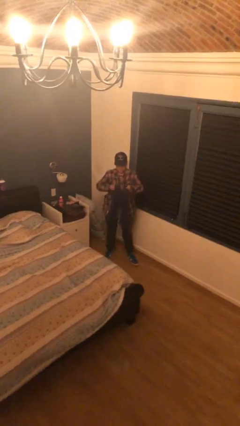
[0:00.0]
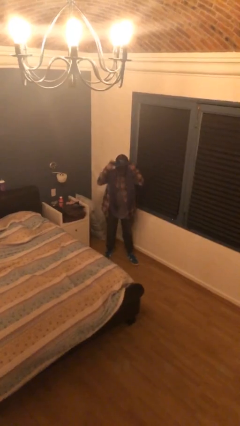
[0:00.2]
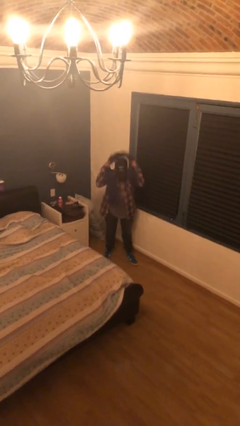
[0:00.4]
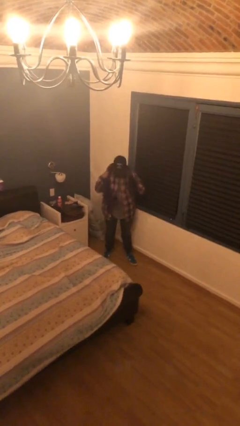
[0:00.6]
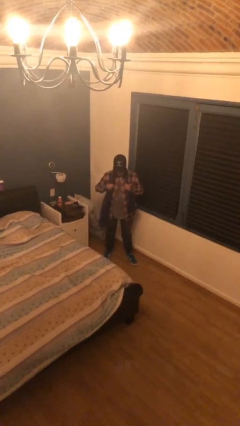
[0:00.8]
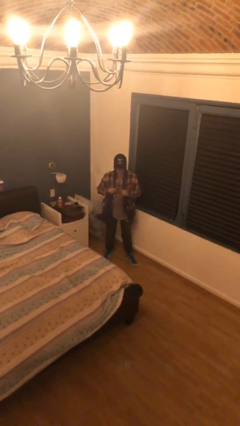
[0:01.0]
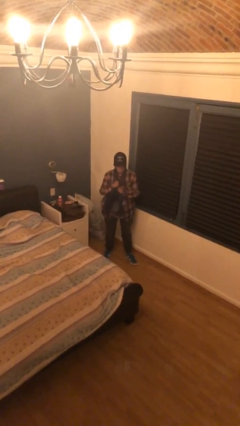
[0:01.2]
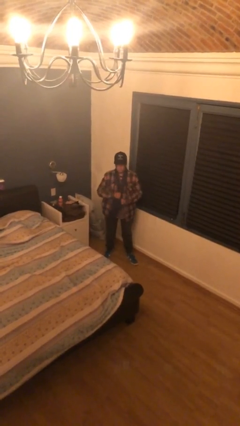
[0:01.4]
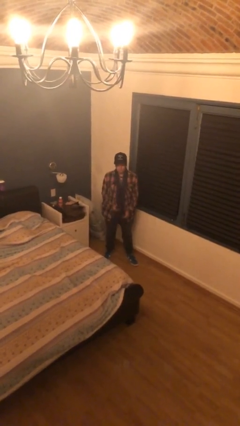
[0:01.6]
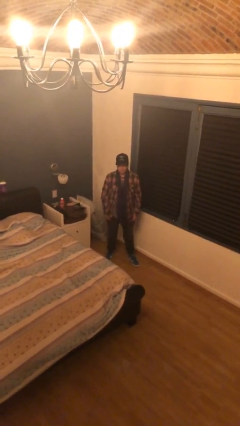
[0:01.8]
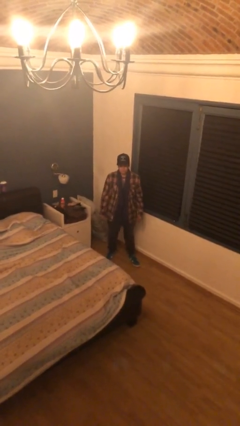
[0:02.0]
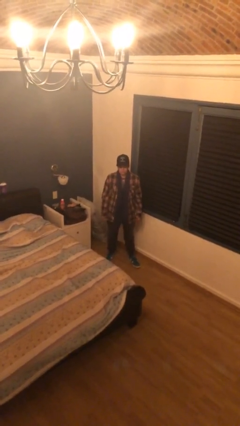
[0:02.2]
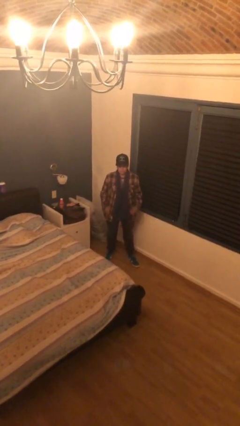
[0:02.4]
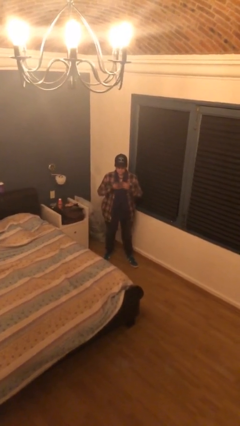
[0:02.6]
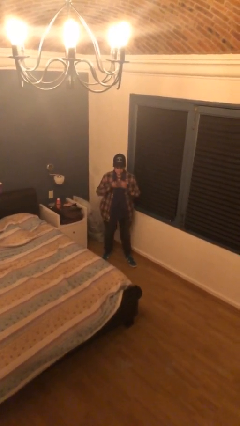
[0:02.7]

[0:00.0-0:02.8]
person puts on scarf

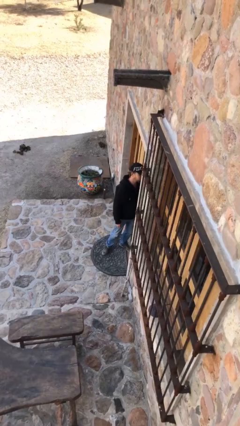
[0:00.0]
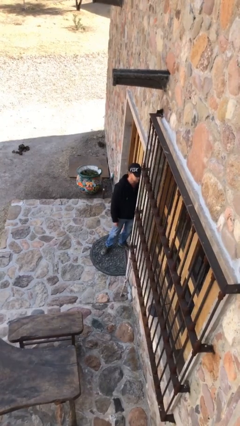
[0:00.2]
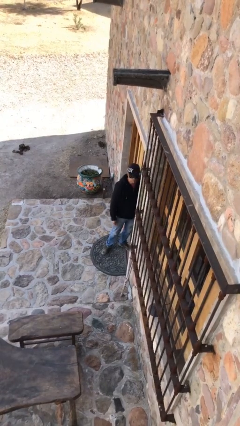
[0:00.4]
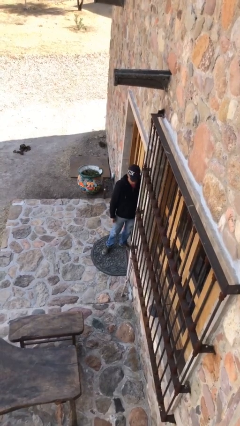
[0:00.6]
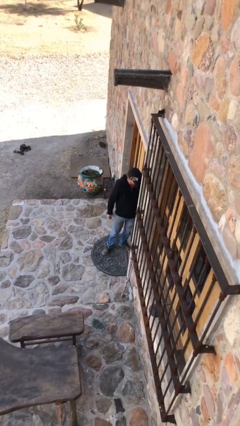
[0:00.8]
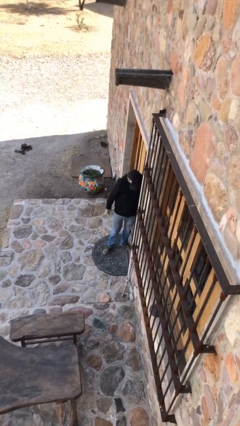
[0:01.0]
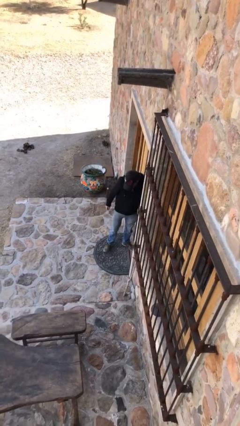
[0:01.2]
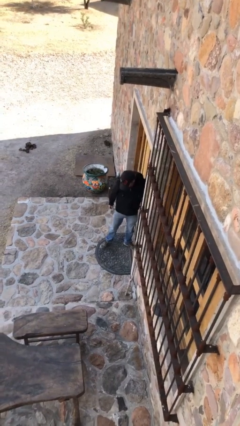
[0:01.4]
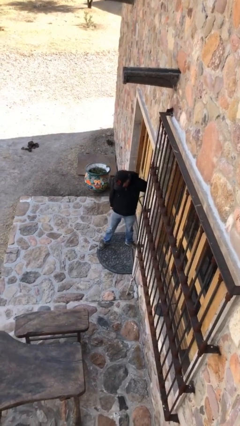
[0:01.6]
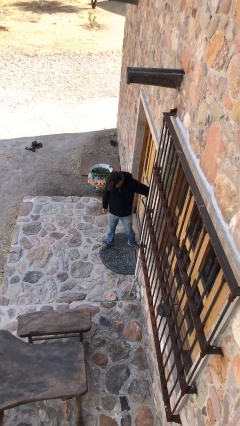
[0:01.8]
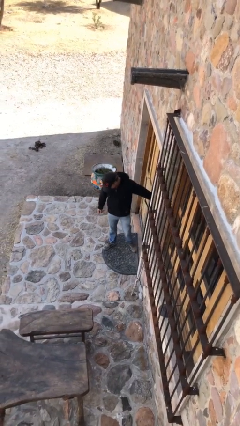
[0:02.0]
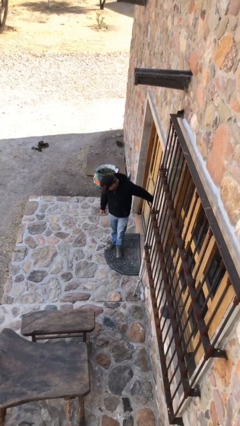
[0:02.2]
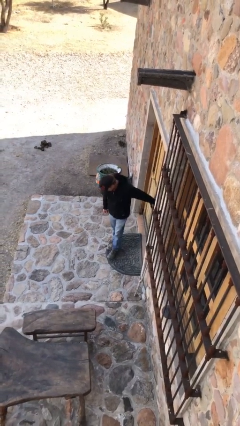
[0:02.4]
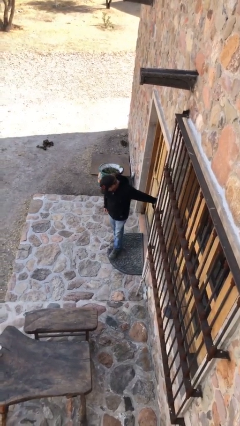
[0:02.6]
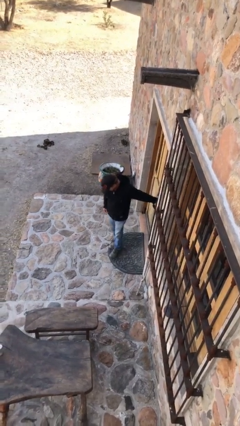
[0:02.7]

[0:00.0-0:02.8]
person closes facility door

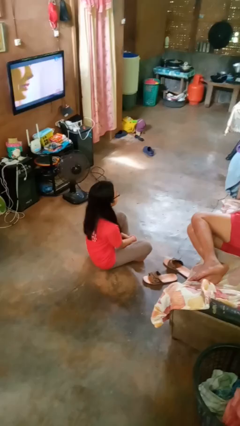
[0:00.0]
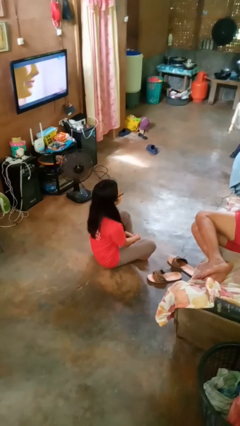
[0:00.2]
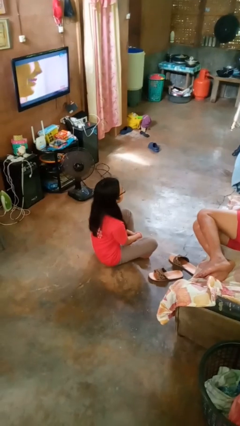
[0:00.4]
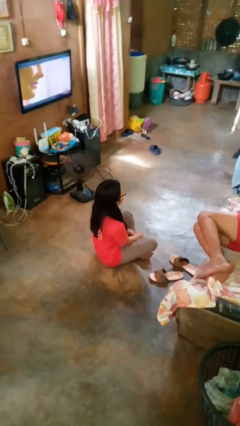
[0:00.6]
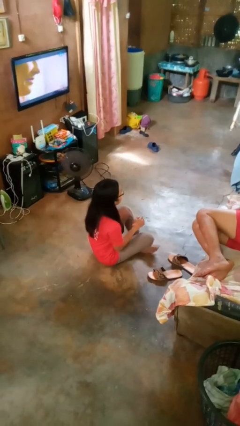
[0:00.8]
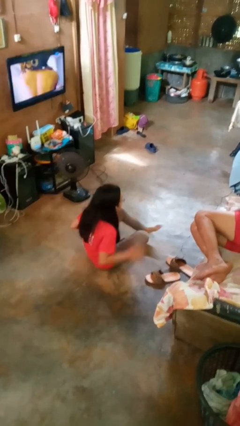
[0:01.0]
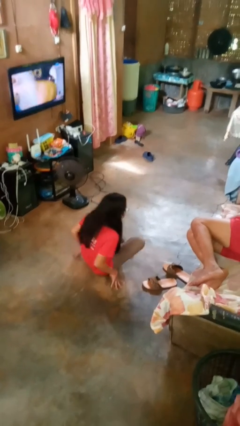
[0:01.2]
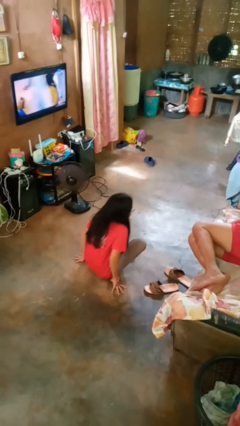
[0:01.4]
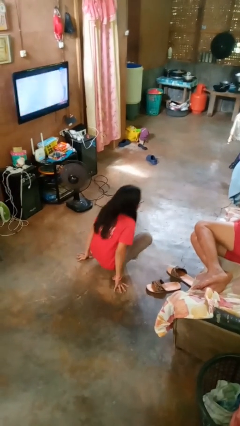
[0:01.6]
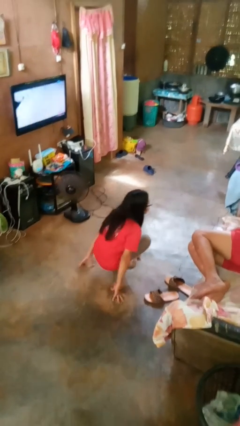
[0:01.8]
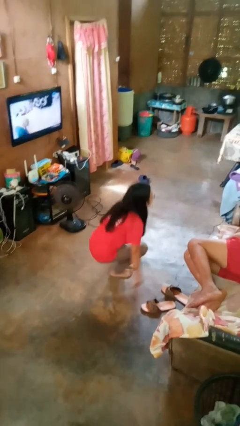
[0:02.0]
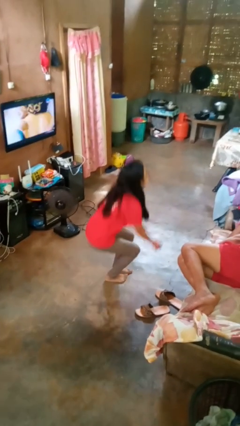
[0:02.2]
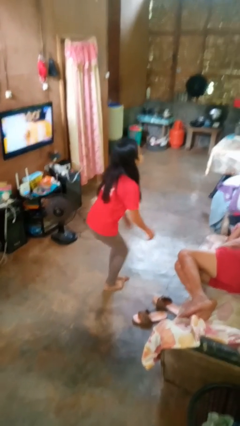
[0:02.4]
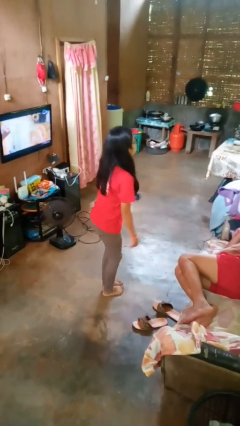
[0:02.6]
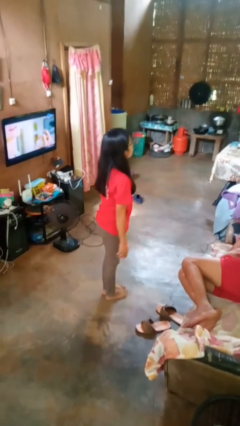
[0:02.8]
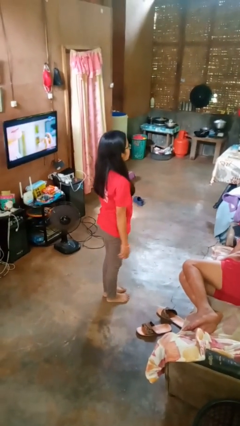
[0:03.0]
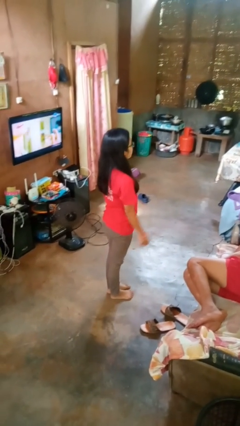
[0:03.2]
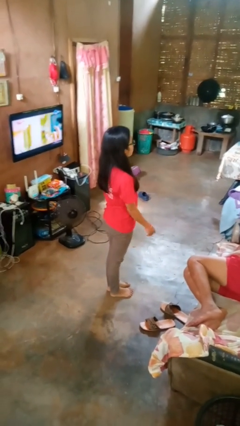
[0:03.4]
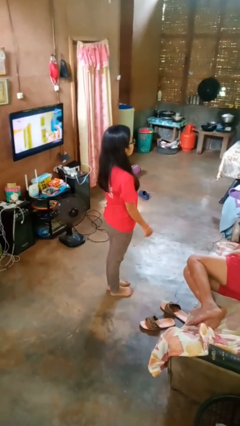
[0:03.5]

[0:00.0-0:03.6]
person stands up from floor

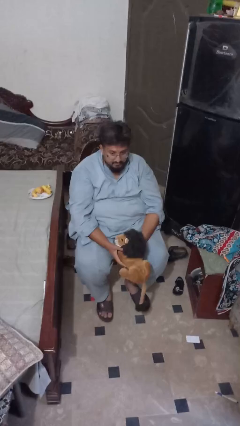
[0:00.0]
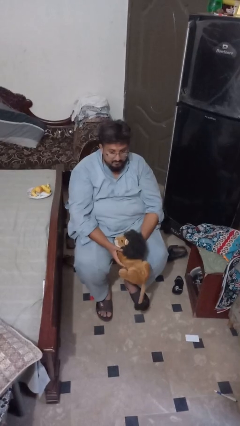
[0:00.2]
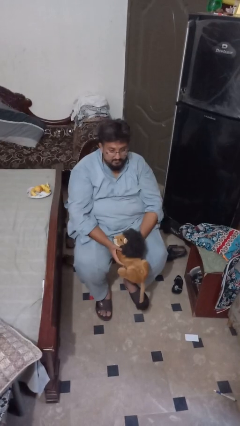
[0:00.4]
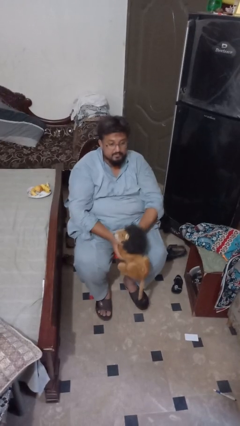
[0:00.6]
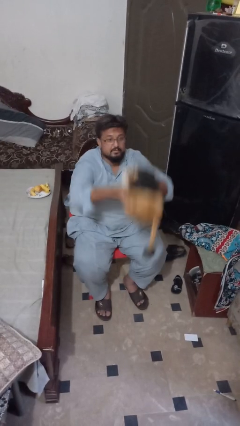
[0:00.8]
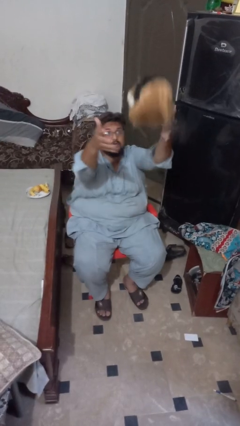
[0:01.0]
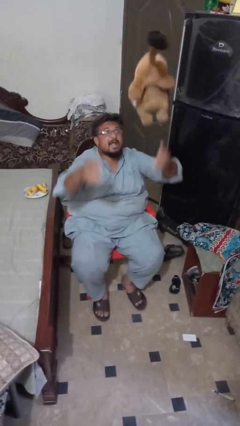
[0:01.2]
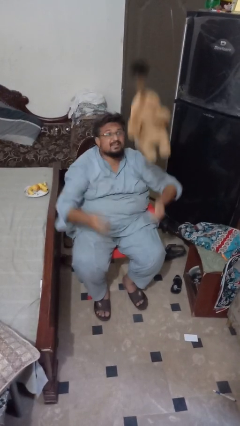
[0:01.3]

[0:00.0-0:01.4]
person drops object

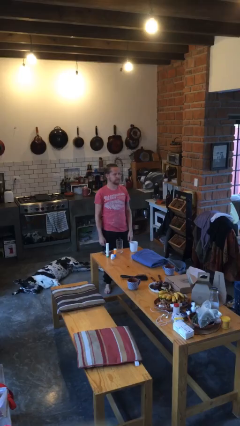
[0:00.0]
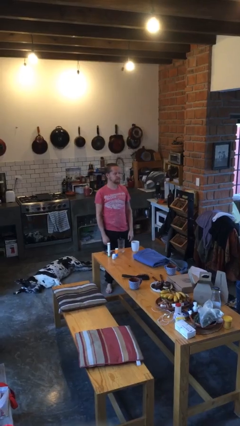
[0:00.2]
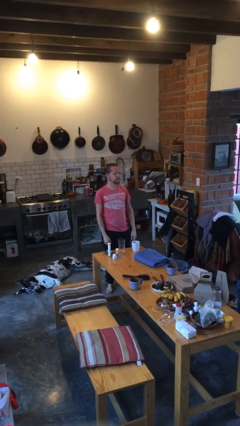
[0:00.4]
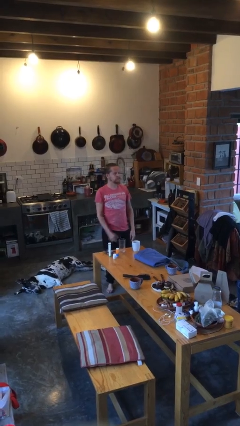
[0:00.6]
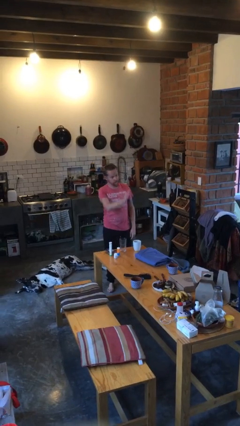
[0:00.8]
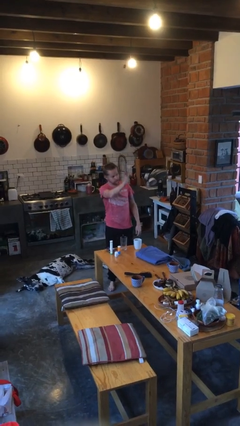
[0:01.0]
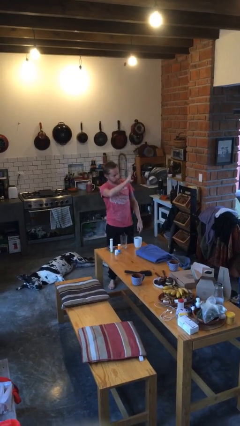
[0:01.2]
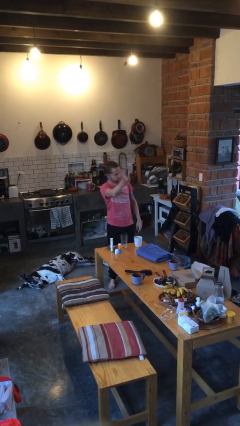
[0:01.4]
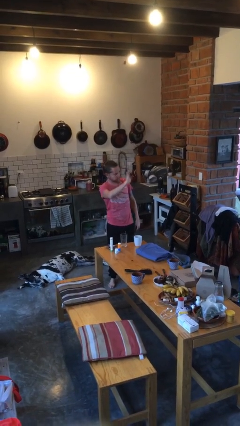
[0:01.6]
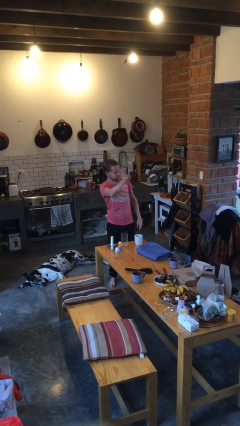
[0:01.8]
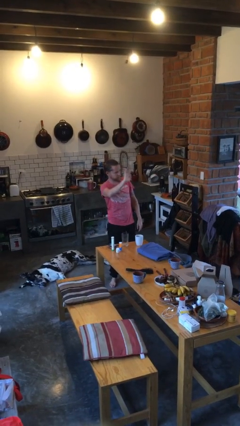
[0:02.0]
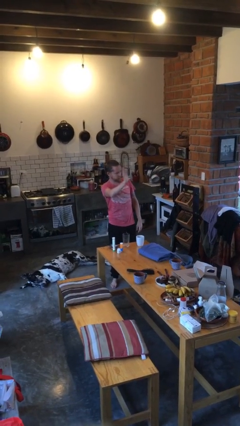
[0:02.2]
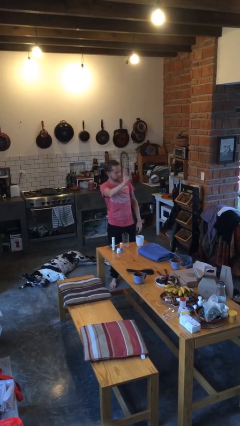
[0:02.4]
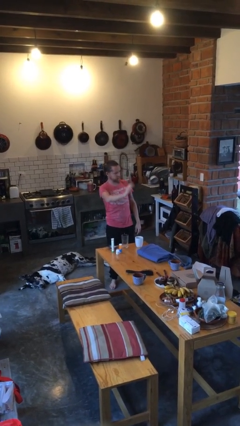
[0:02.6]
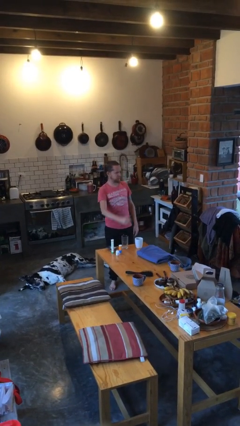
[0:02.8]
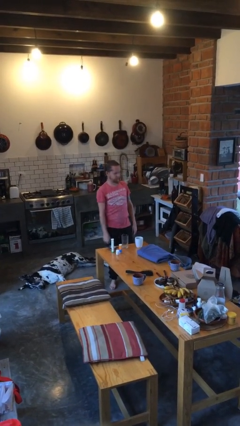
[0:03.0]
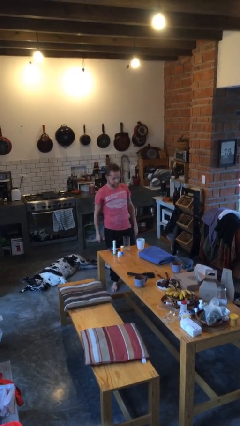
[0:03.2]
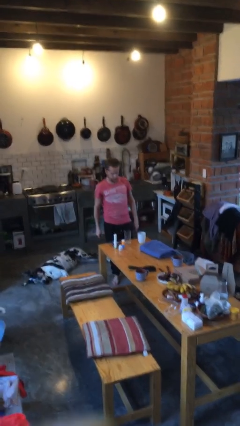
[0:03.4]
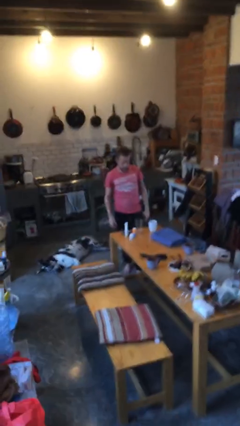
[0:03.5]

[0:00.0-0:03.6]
person waves at person

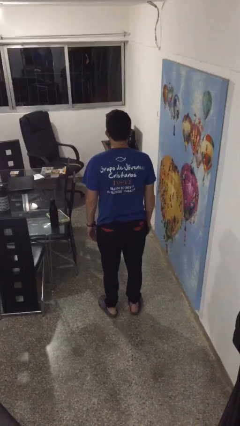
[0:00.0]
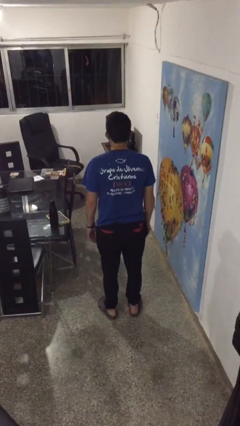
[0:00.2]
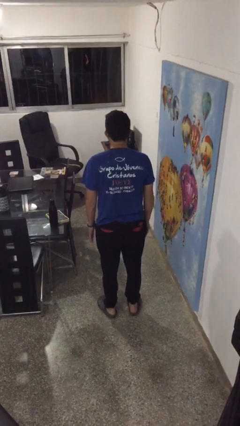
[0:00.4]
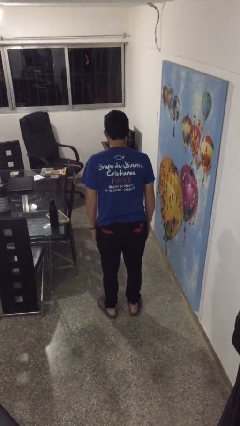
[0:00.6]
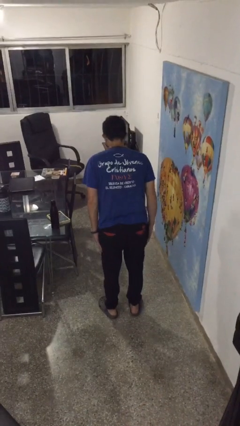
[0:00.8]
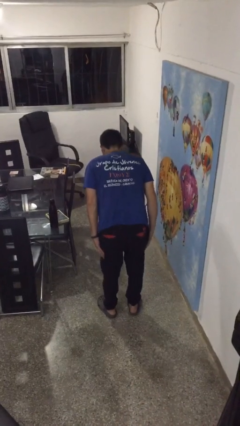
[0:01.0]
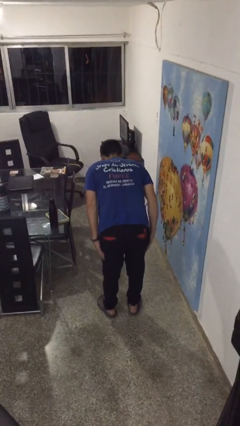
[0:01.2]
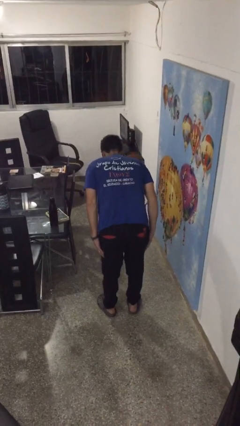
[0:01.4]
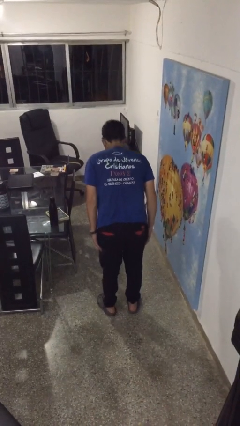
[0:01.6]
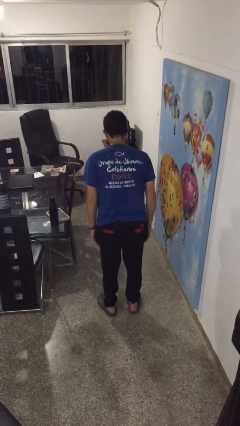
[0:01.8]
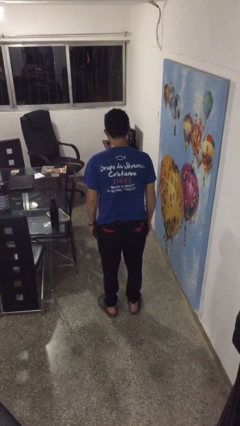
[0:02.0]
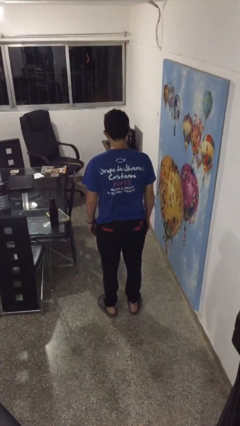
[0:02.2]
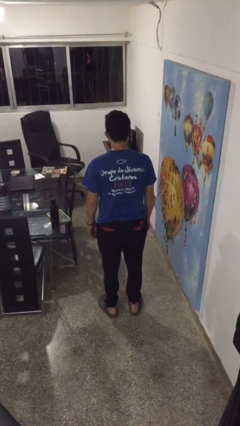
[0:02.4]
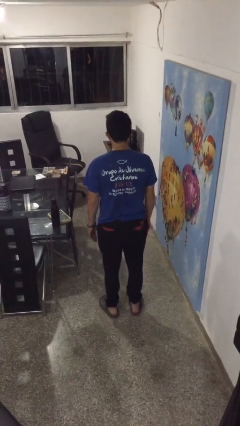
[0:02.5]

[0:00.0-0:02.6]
person bows

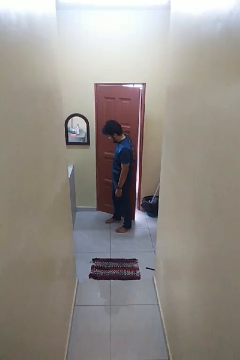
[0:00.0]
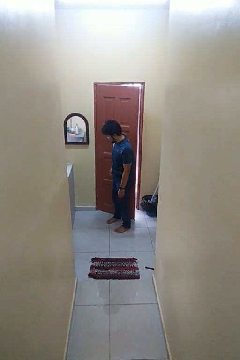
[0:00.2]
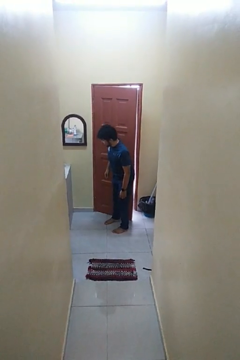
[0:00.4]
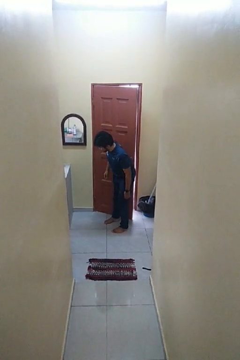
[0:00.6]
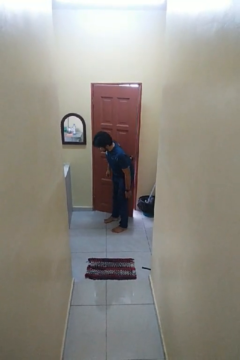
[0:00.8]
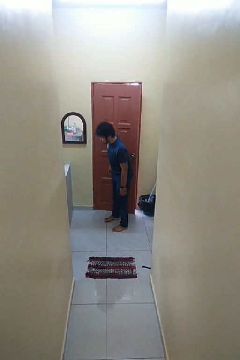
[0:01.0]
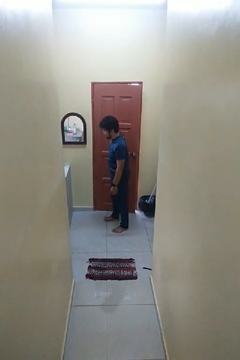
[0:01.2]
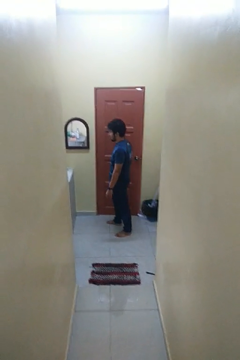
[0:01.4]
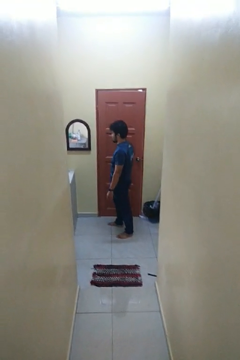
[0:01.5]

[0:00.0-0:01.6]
person closes door with hip
